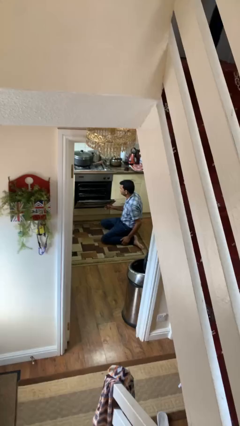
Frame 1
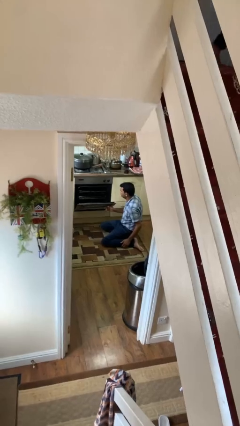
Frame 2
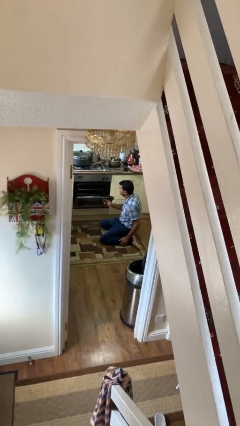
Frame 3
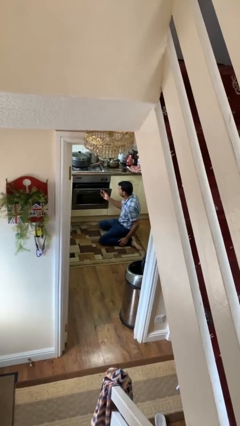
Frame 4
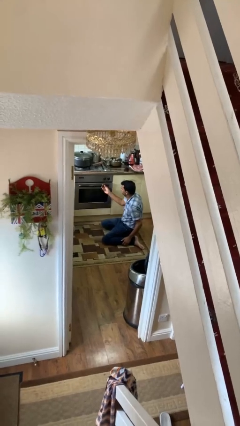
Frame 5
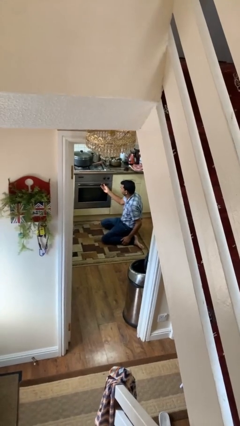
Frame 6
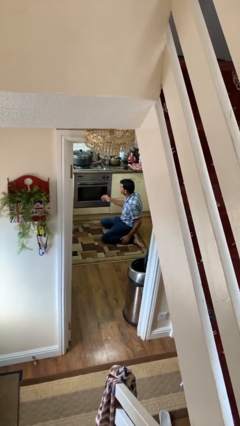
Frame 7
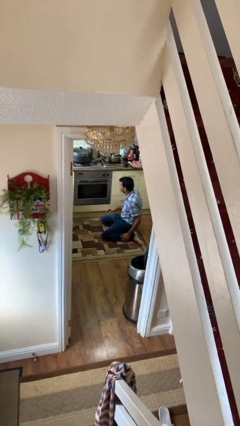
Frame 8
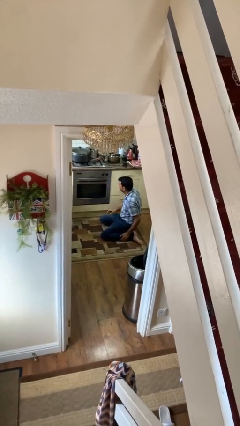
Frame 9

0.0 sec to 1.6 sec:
person closes oven door

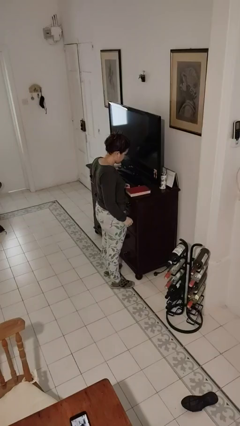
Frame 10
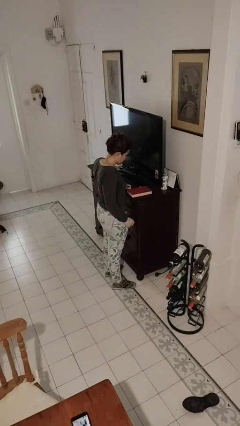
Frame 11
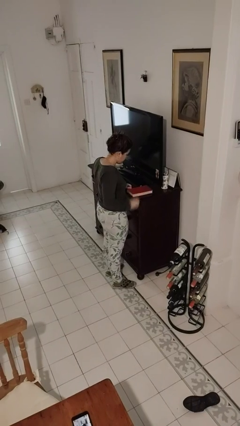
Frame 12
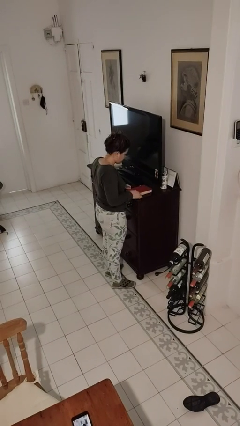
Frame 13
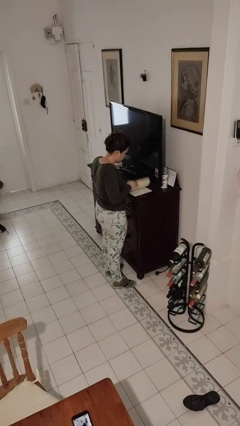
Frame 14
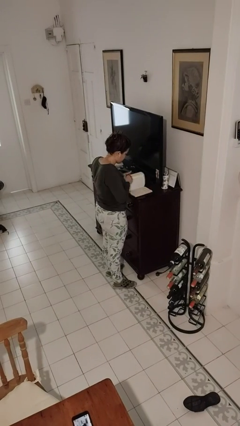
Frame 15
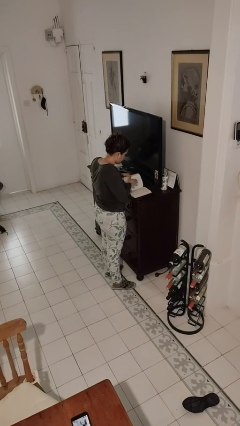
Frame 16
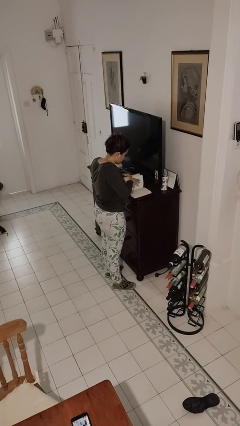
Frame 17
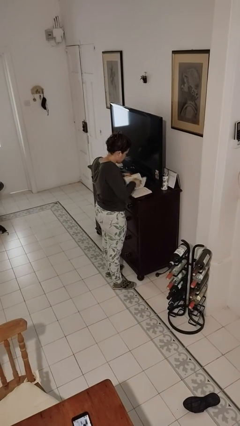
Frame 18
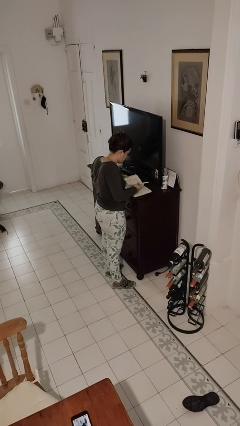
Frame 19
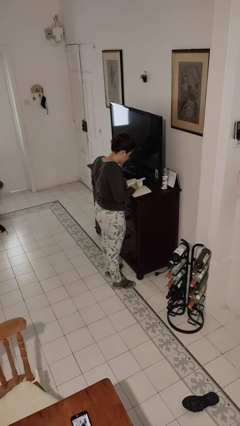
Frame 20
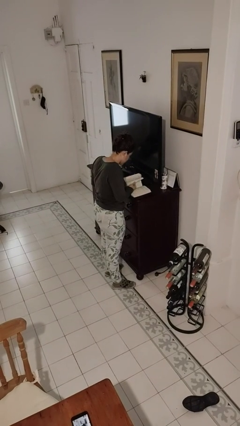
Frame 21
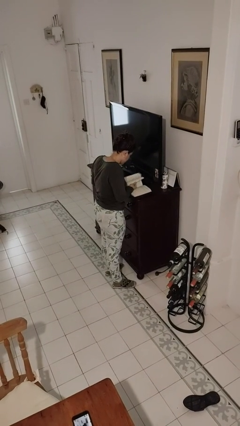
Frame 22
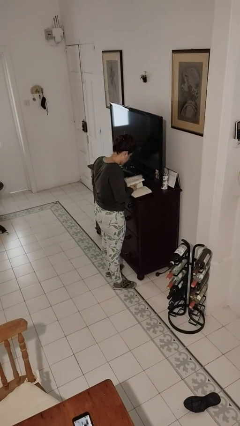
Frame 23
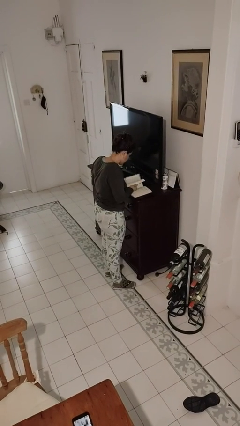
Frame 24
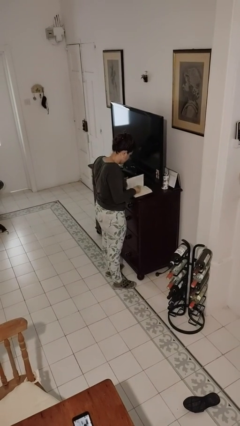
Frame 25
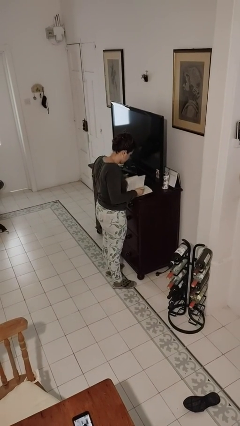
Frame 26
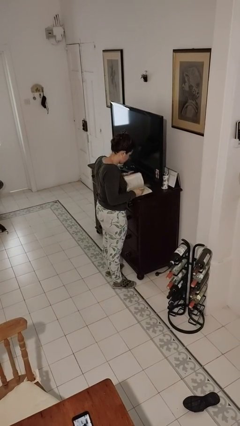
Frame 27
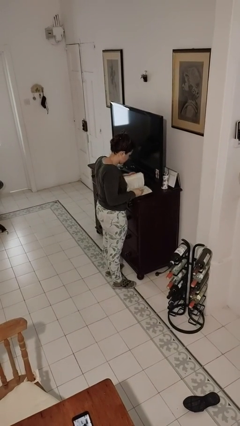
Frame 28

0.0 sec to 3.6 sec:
person reads book

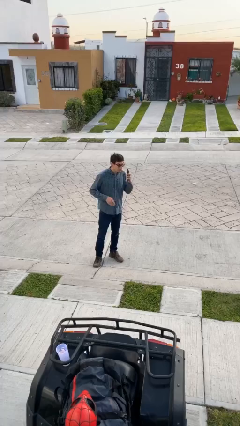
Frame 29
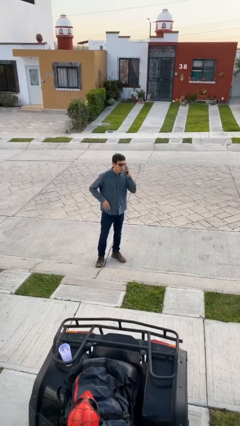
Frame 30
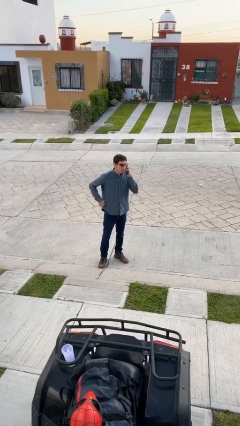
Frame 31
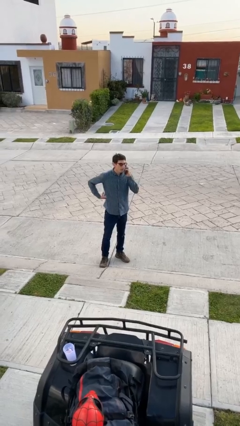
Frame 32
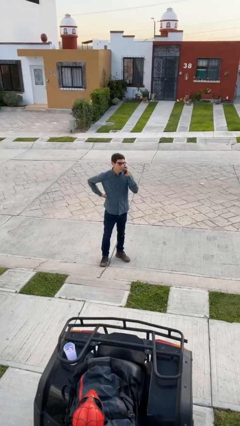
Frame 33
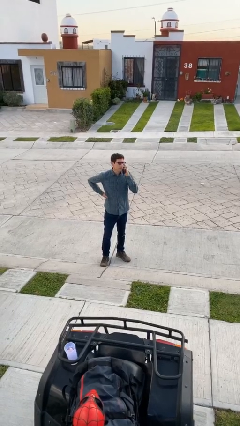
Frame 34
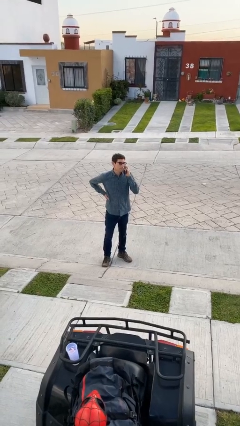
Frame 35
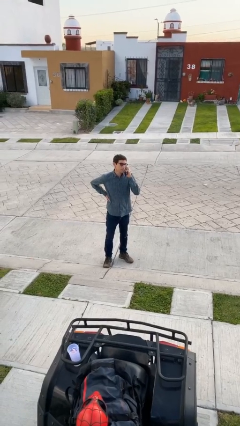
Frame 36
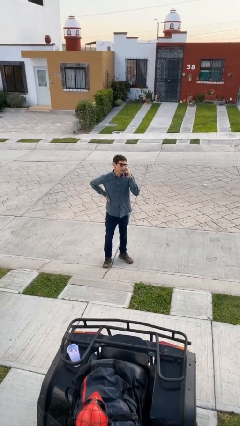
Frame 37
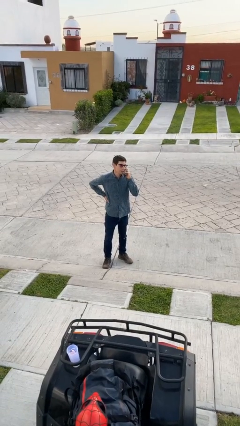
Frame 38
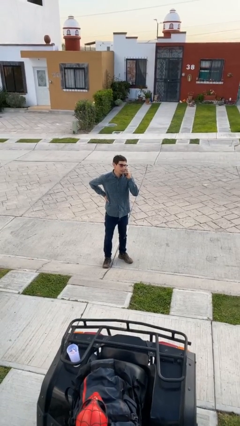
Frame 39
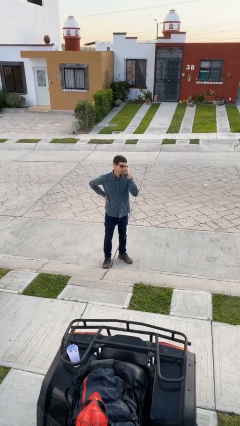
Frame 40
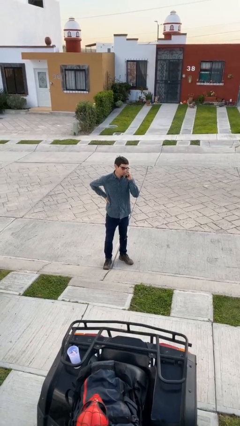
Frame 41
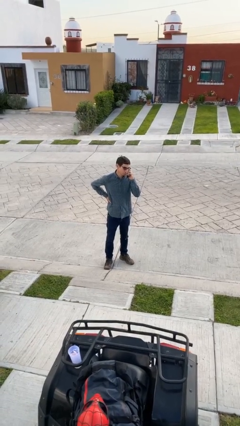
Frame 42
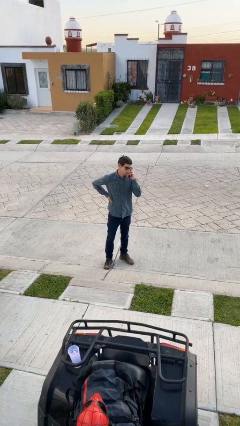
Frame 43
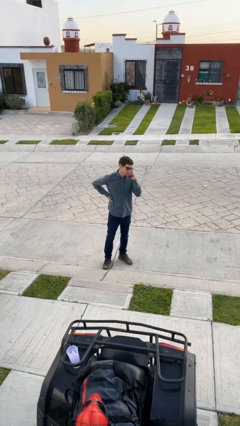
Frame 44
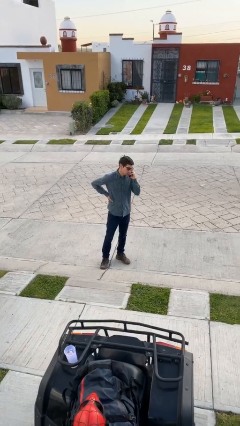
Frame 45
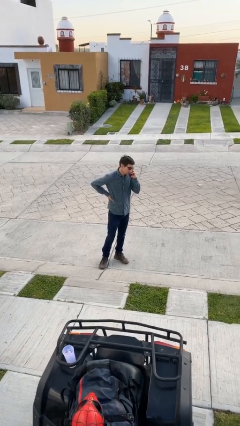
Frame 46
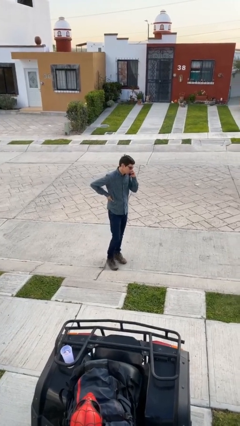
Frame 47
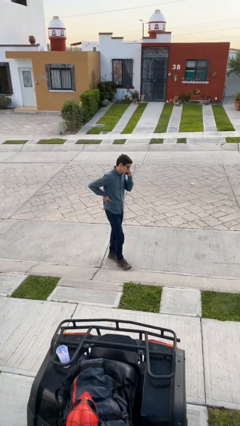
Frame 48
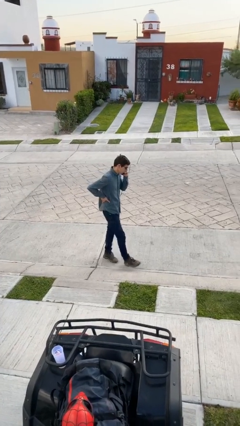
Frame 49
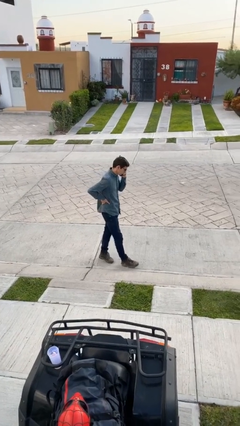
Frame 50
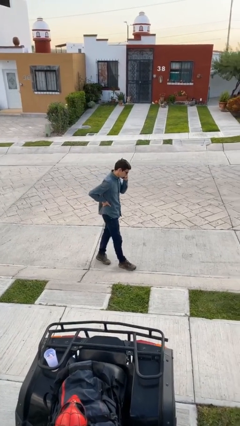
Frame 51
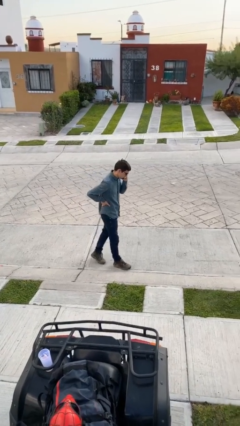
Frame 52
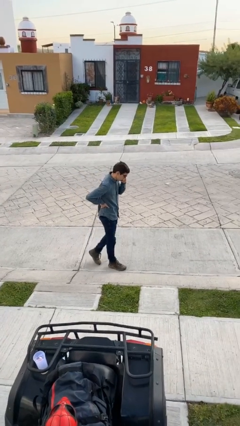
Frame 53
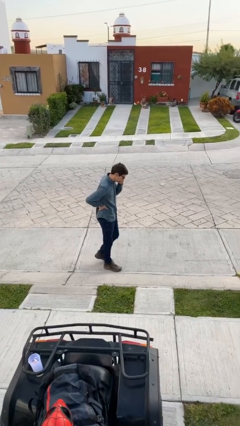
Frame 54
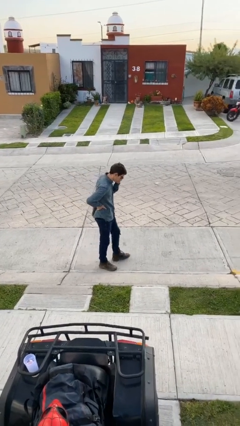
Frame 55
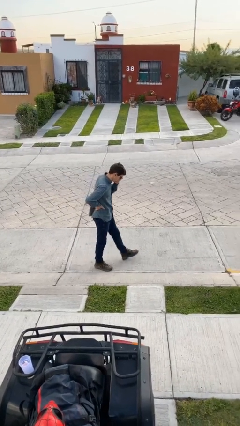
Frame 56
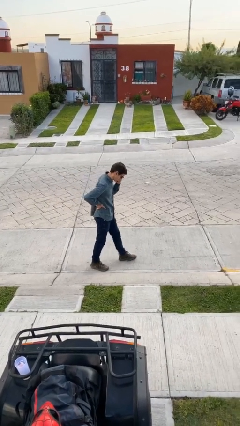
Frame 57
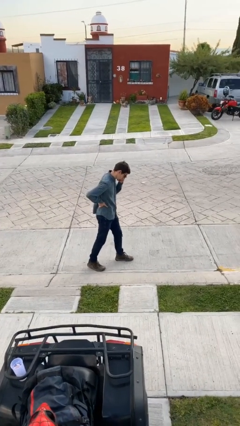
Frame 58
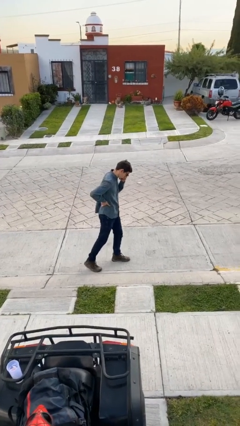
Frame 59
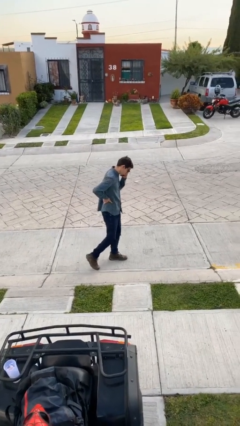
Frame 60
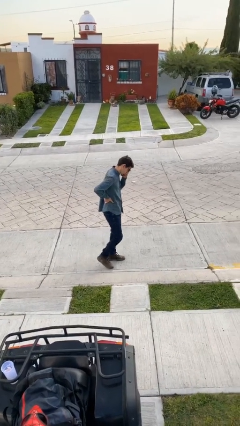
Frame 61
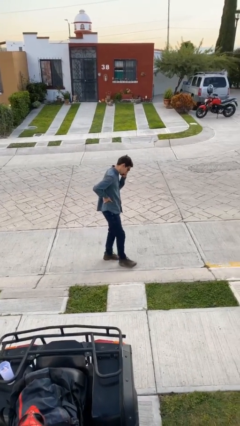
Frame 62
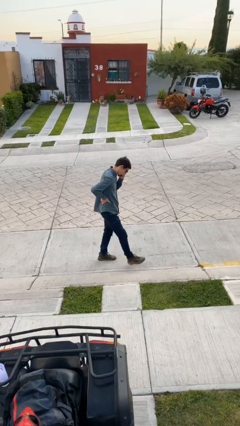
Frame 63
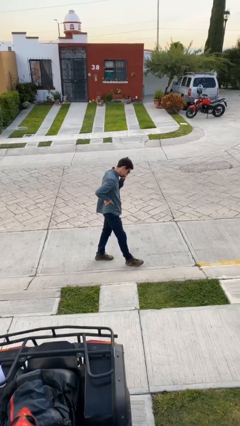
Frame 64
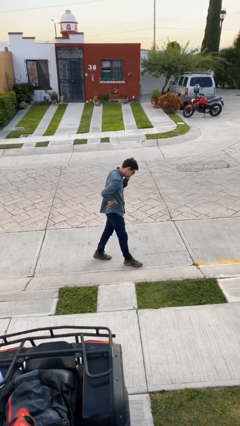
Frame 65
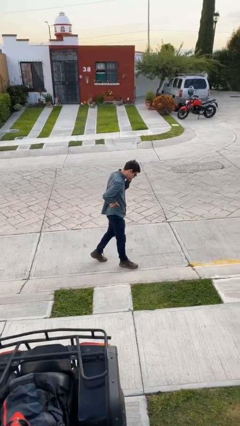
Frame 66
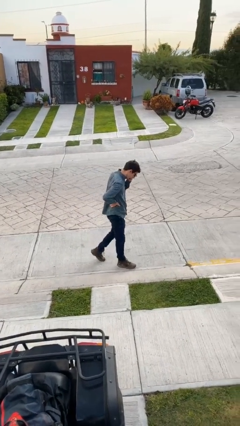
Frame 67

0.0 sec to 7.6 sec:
person talks on phone

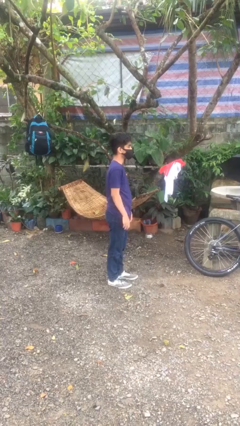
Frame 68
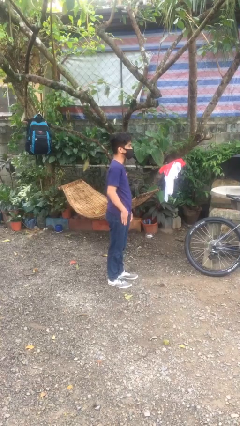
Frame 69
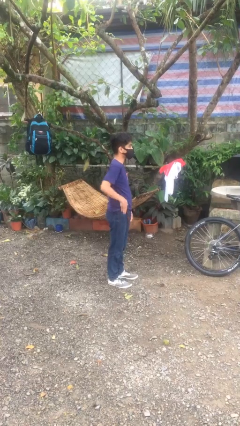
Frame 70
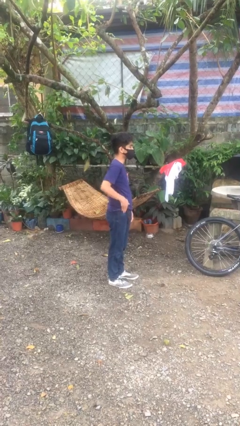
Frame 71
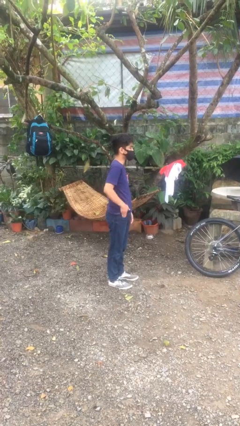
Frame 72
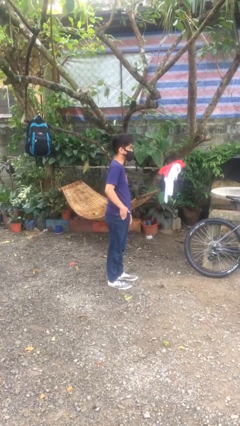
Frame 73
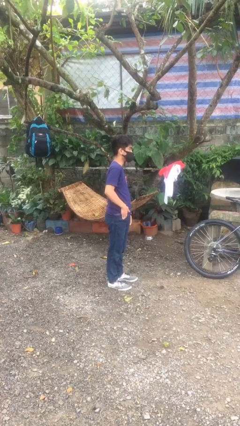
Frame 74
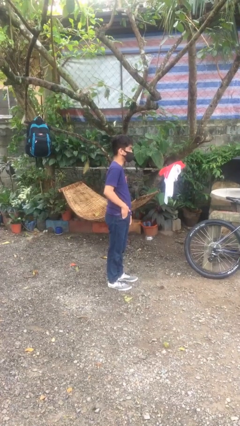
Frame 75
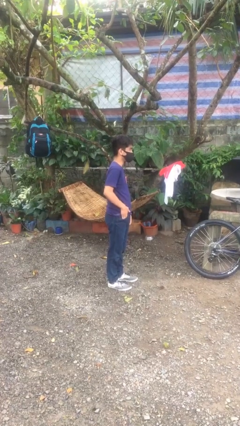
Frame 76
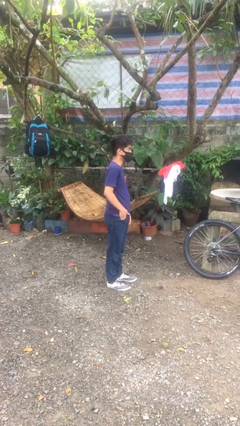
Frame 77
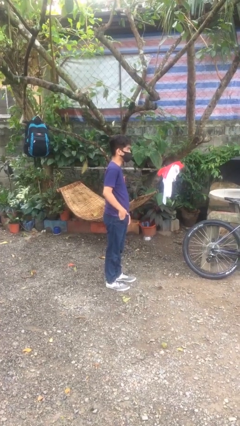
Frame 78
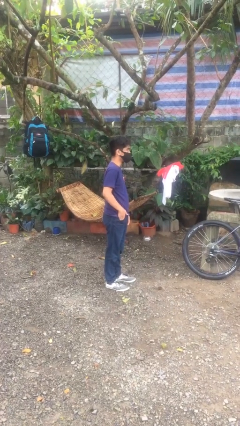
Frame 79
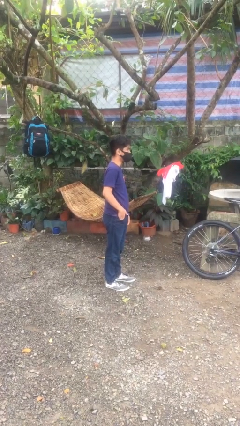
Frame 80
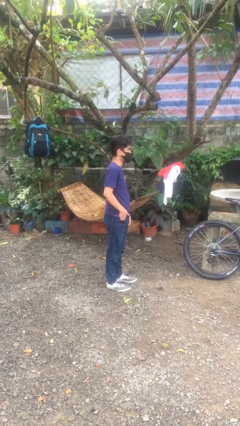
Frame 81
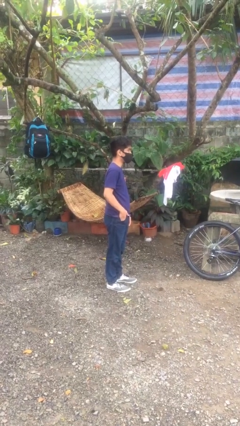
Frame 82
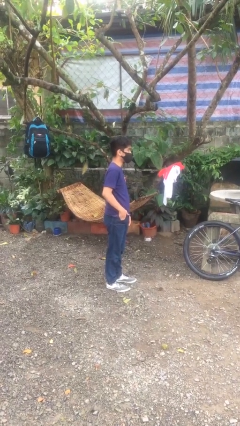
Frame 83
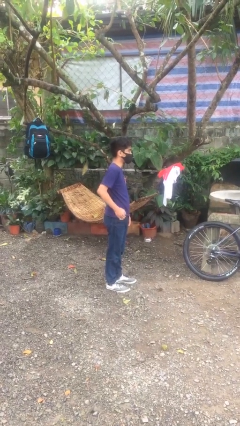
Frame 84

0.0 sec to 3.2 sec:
person puts hands in back pockets

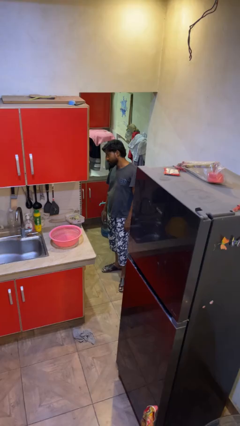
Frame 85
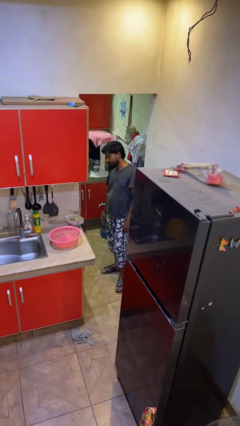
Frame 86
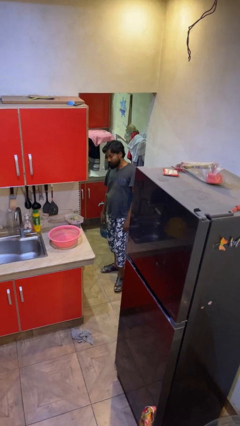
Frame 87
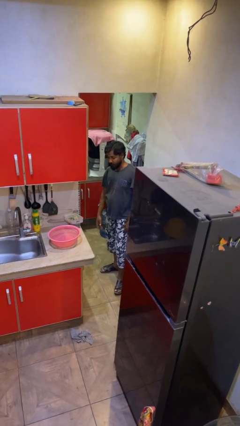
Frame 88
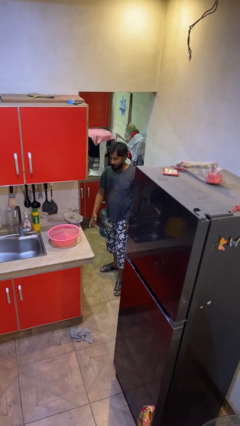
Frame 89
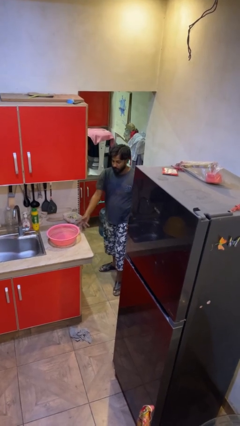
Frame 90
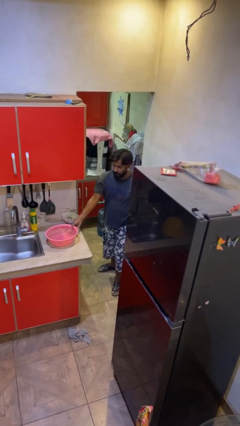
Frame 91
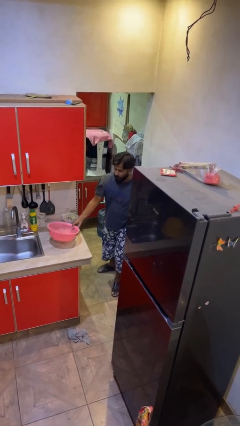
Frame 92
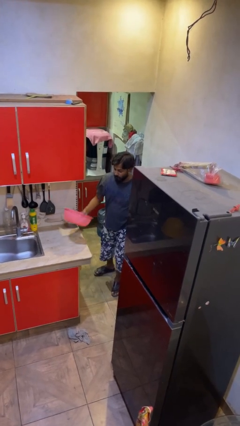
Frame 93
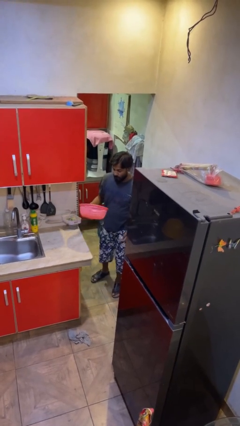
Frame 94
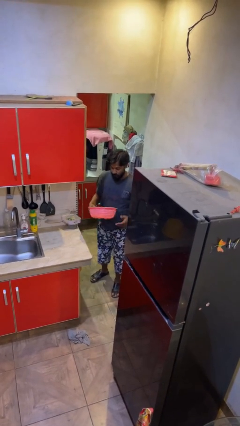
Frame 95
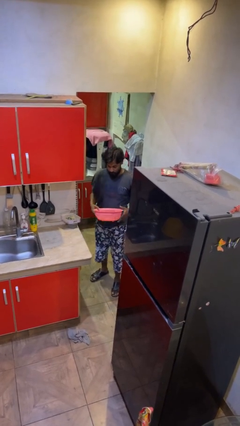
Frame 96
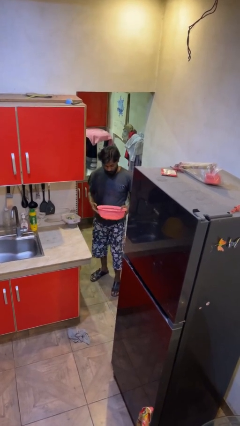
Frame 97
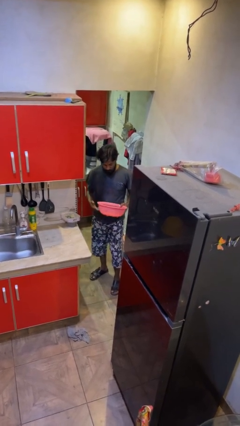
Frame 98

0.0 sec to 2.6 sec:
person picks up object from countertop
